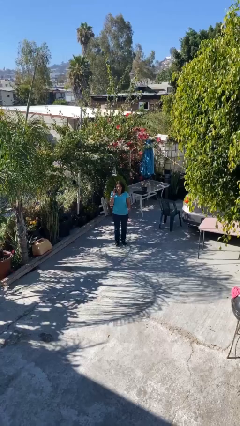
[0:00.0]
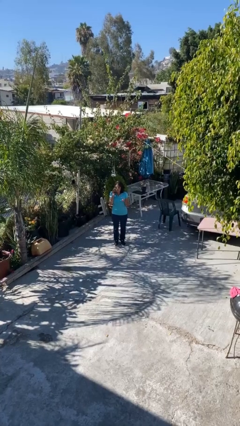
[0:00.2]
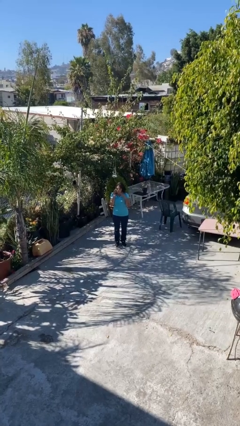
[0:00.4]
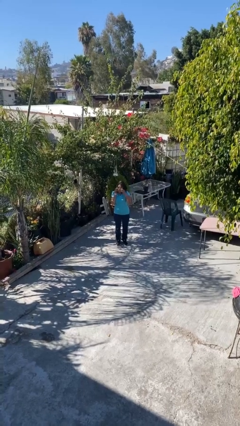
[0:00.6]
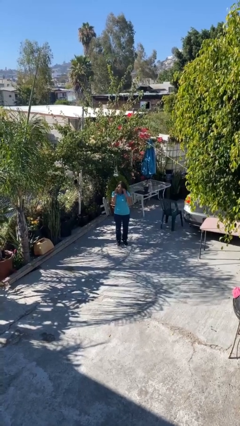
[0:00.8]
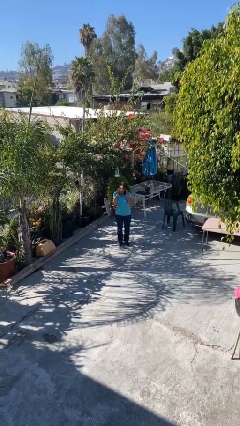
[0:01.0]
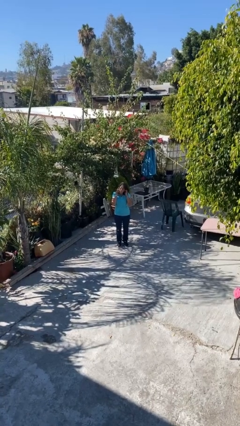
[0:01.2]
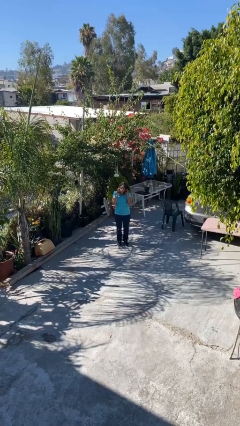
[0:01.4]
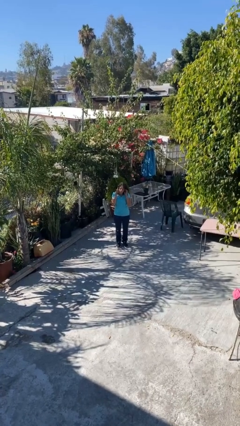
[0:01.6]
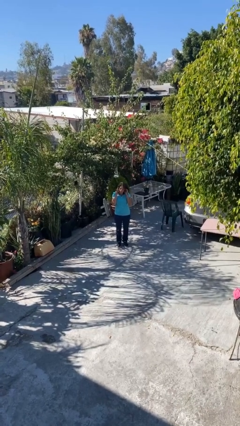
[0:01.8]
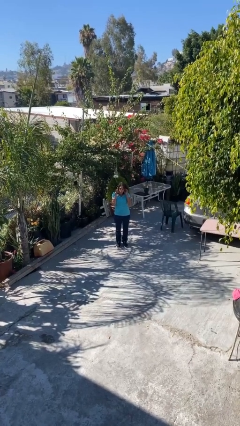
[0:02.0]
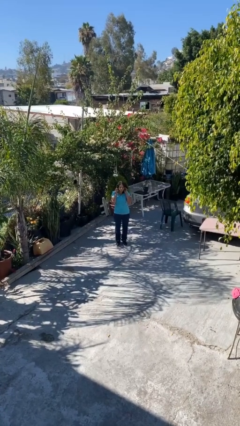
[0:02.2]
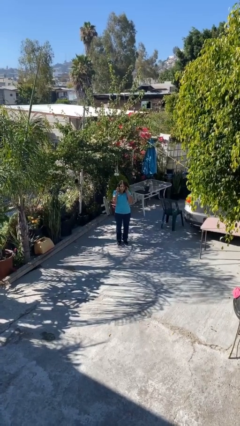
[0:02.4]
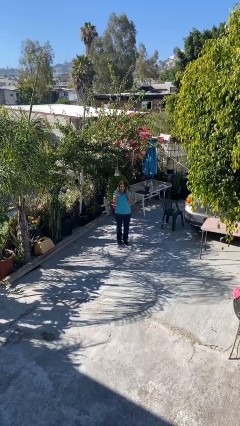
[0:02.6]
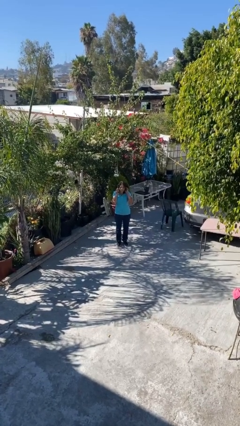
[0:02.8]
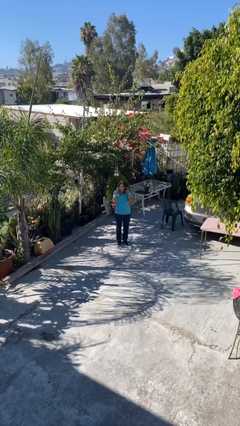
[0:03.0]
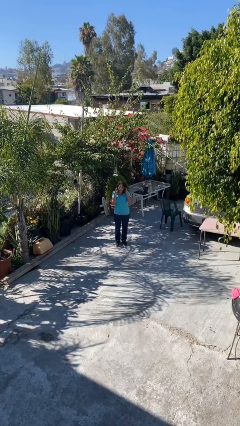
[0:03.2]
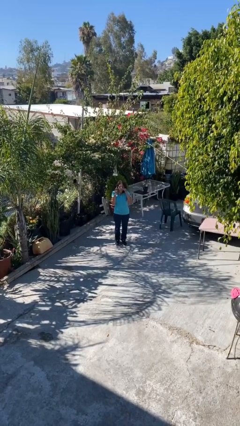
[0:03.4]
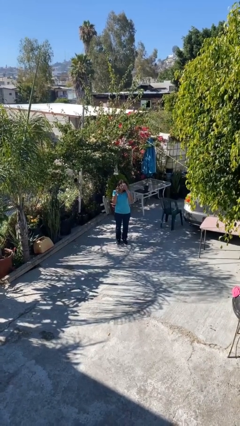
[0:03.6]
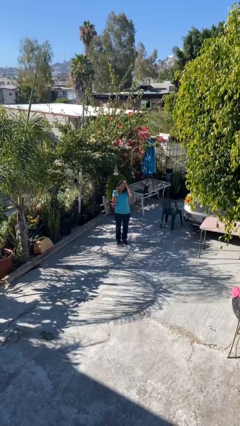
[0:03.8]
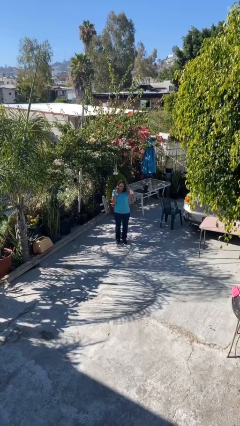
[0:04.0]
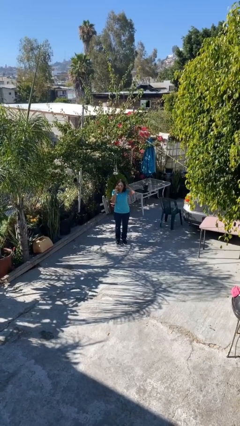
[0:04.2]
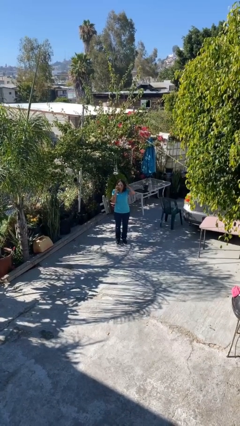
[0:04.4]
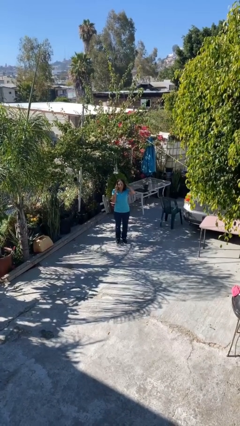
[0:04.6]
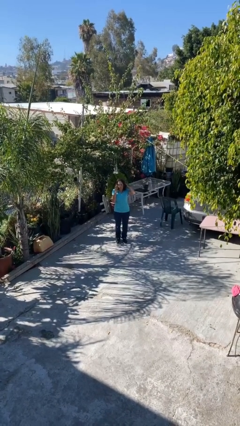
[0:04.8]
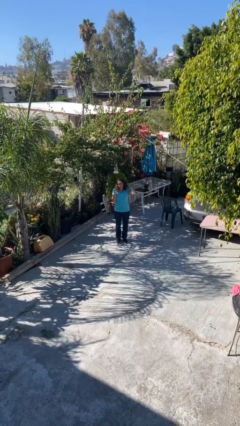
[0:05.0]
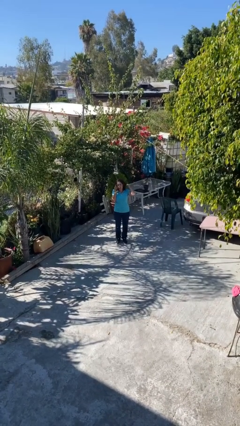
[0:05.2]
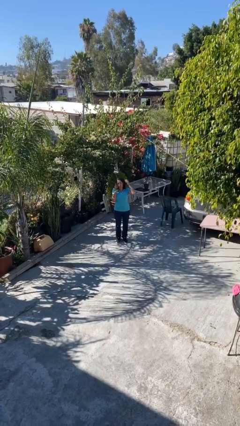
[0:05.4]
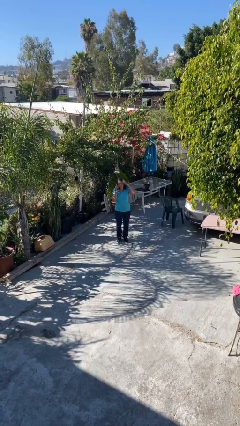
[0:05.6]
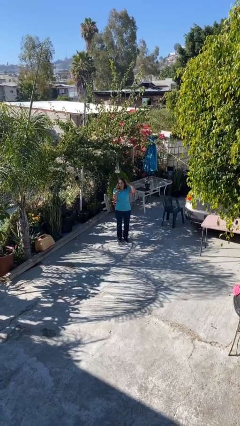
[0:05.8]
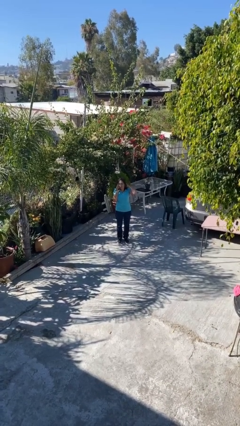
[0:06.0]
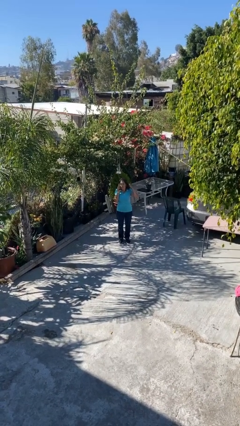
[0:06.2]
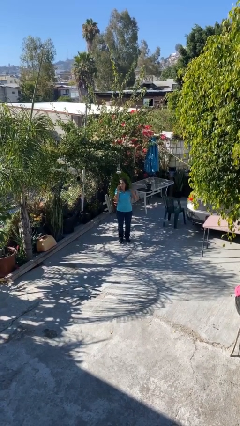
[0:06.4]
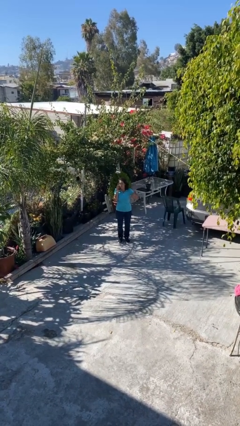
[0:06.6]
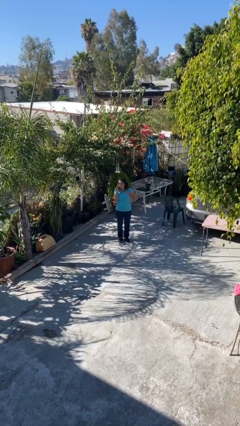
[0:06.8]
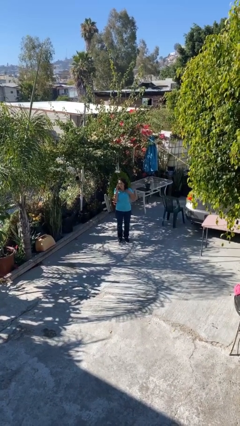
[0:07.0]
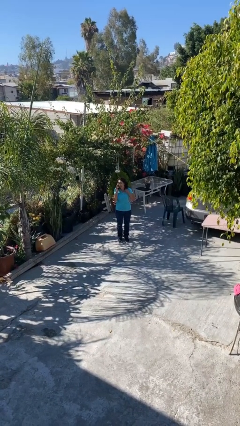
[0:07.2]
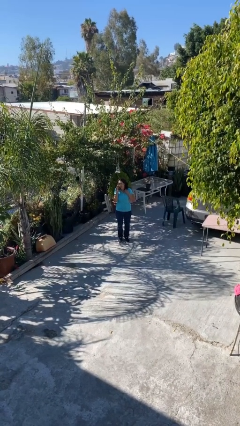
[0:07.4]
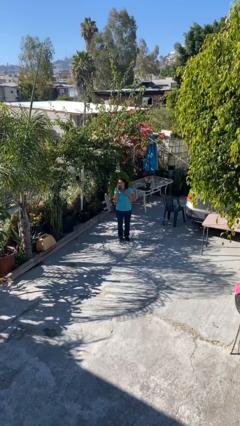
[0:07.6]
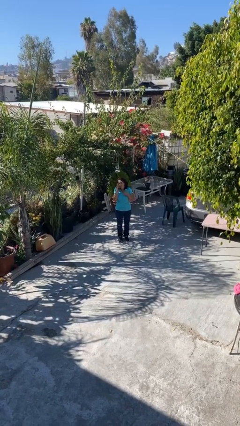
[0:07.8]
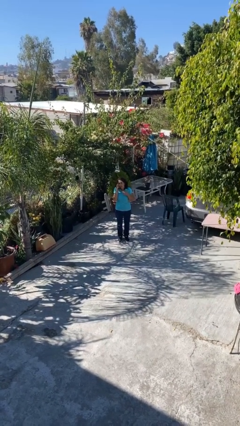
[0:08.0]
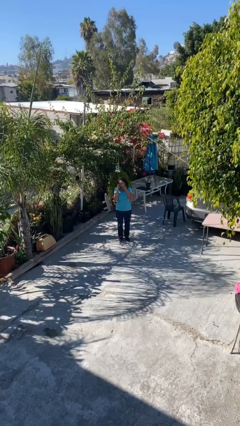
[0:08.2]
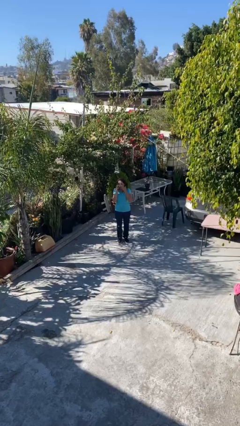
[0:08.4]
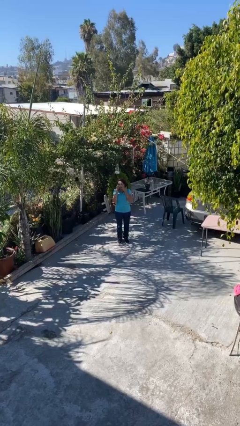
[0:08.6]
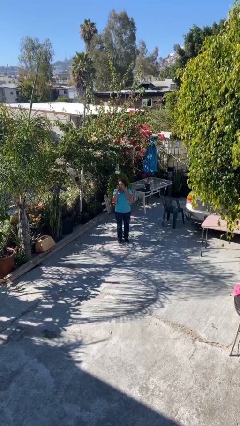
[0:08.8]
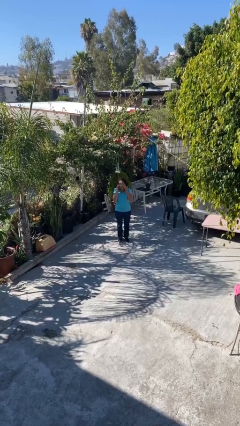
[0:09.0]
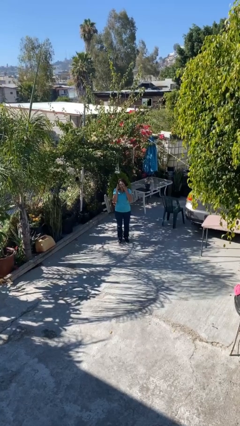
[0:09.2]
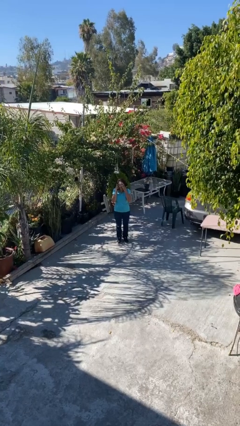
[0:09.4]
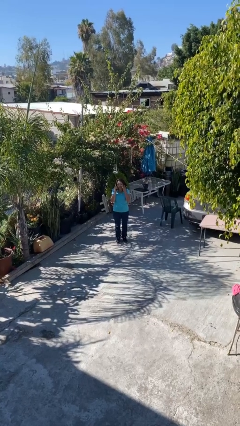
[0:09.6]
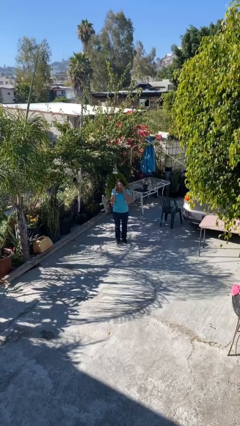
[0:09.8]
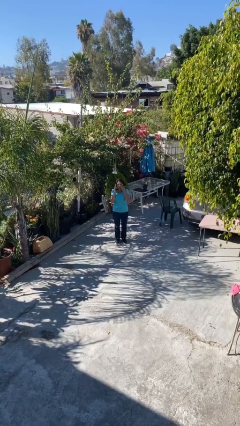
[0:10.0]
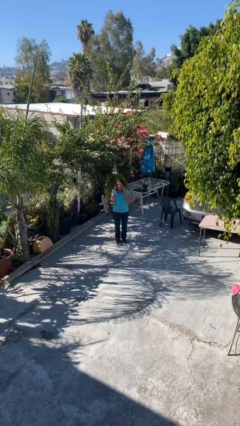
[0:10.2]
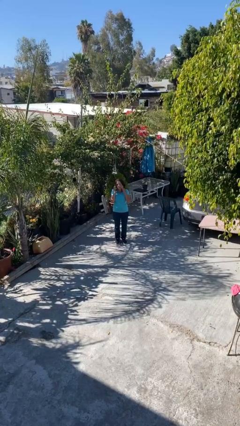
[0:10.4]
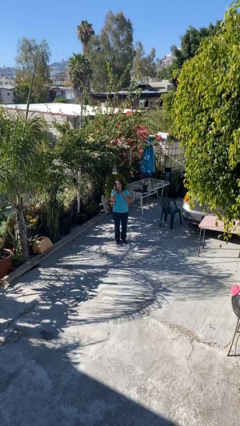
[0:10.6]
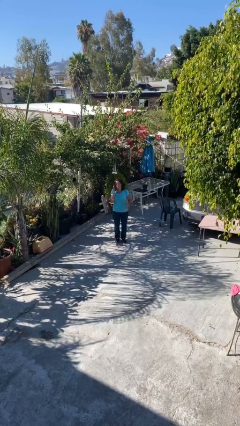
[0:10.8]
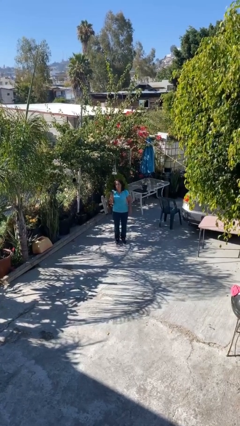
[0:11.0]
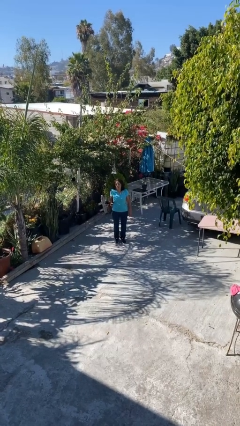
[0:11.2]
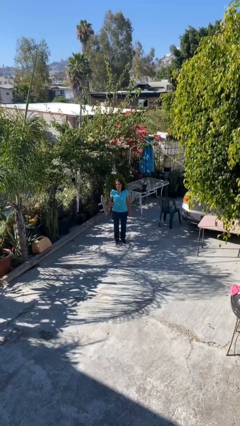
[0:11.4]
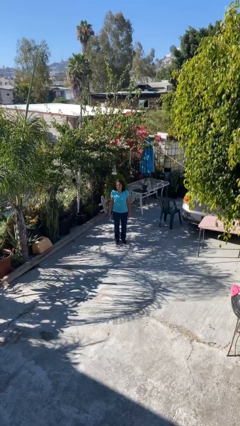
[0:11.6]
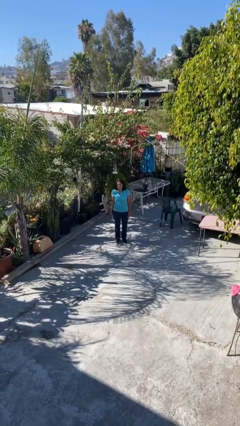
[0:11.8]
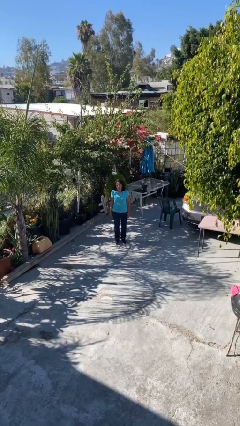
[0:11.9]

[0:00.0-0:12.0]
person talks on phone

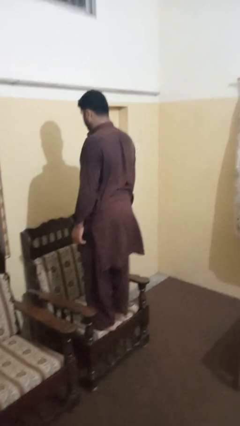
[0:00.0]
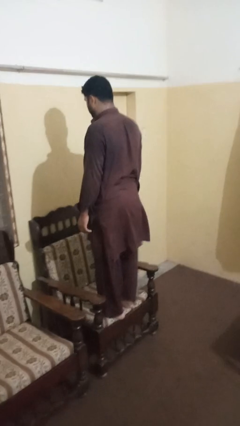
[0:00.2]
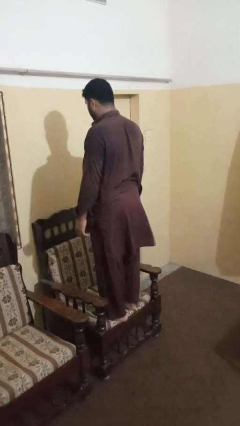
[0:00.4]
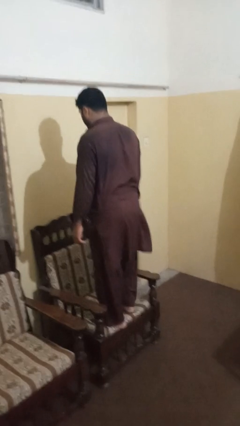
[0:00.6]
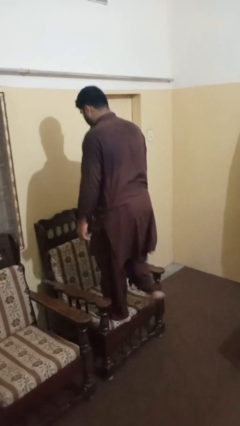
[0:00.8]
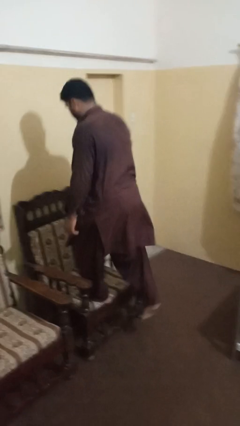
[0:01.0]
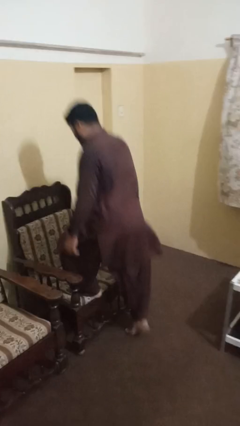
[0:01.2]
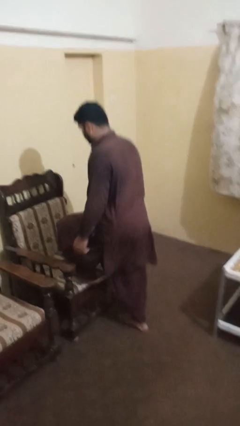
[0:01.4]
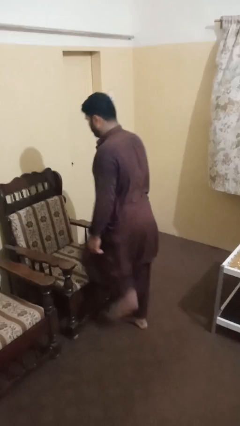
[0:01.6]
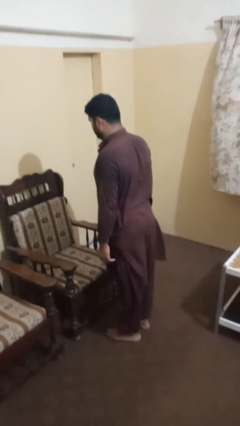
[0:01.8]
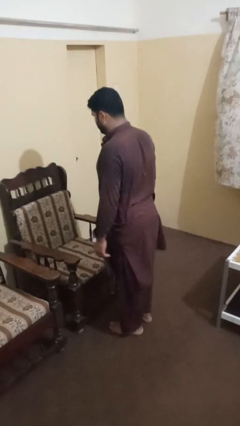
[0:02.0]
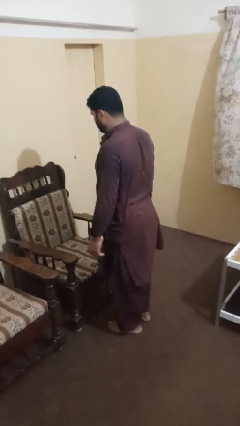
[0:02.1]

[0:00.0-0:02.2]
person climbs off chair

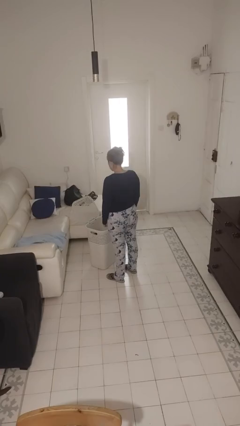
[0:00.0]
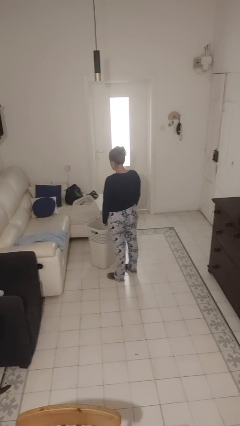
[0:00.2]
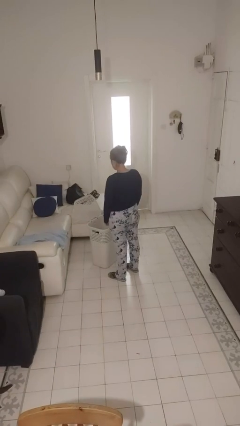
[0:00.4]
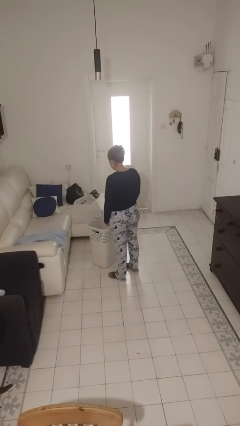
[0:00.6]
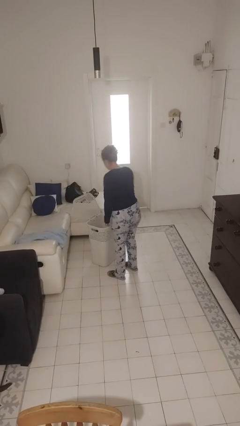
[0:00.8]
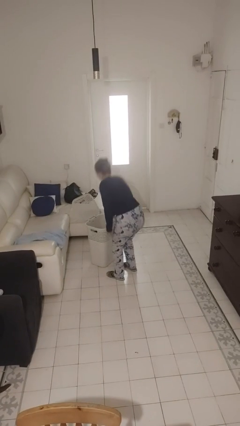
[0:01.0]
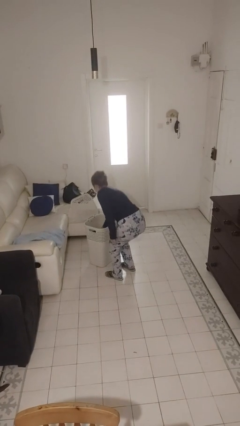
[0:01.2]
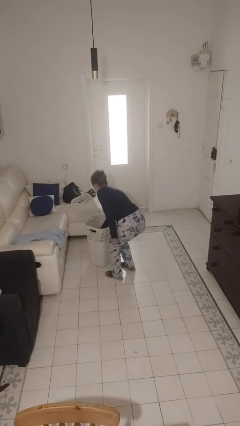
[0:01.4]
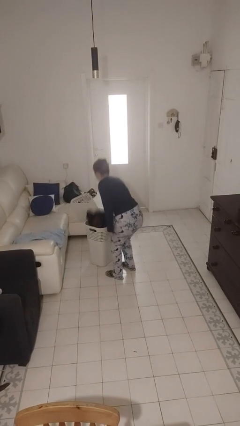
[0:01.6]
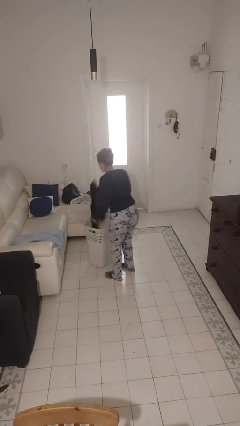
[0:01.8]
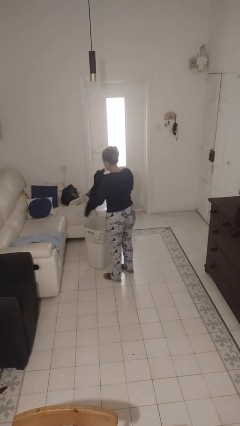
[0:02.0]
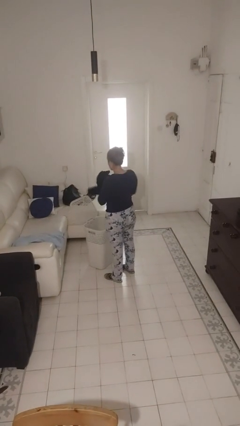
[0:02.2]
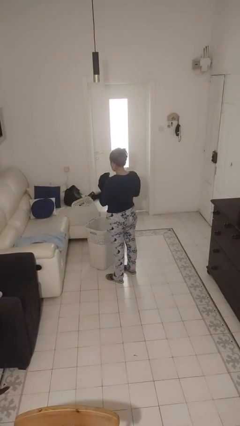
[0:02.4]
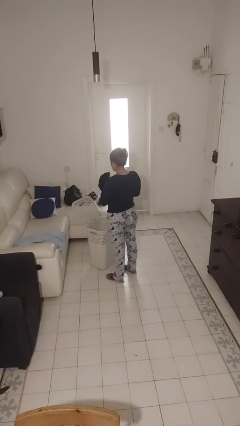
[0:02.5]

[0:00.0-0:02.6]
person takes object from basket

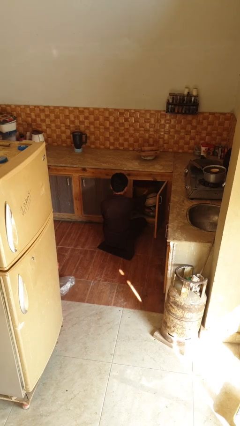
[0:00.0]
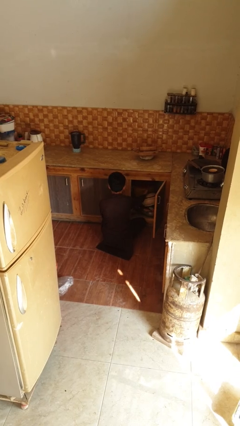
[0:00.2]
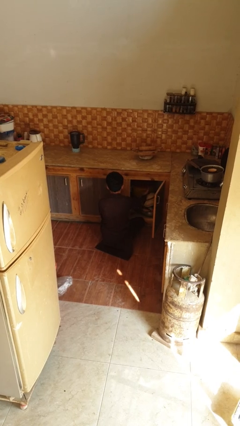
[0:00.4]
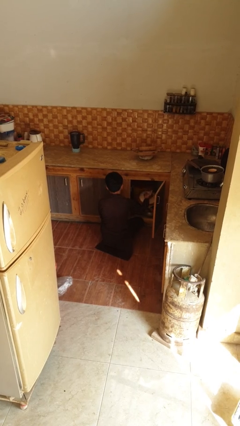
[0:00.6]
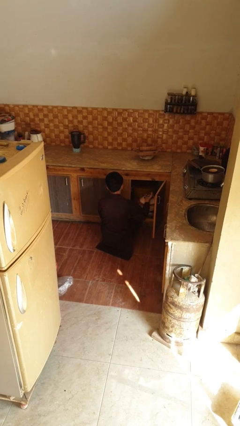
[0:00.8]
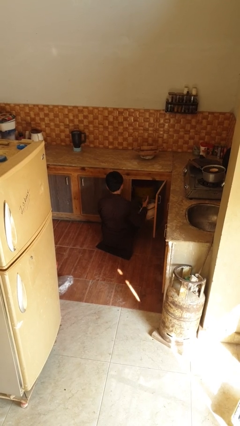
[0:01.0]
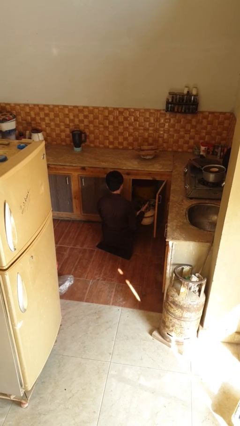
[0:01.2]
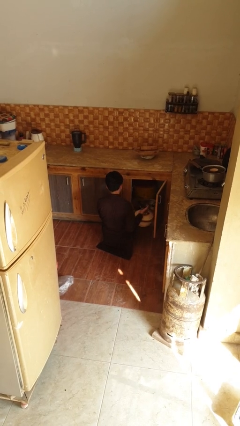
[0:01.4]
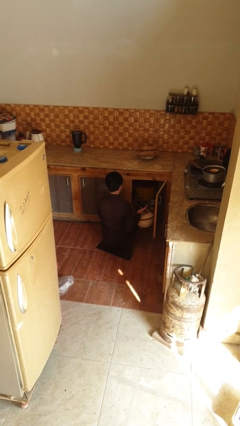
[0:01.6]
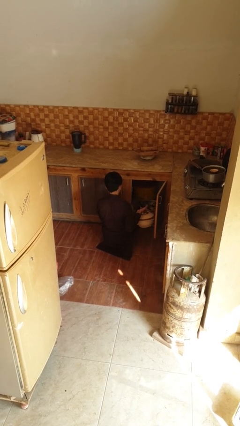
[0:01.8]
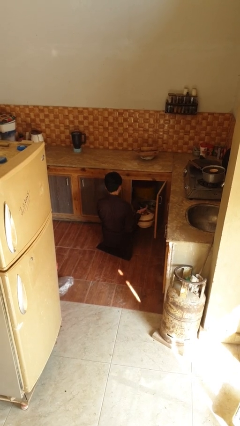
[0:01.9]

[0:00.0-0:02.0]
person takes object from kitchen drawer
